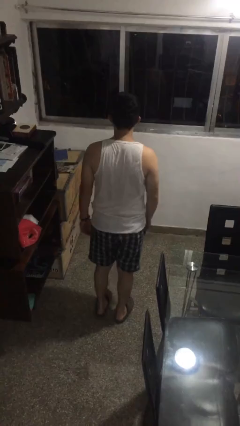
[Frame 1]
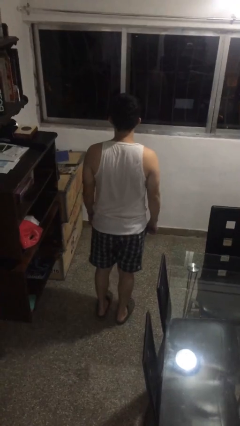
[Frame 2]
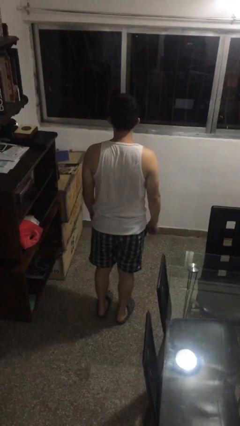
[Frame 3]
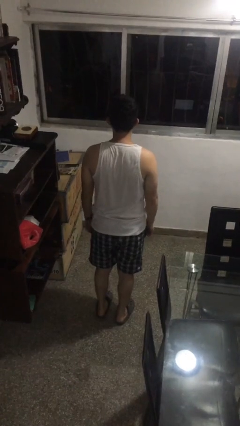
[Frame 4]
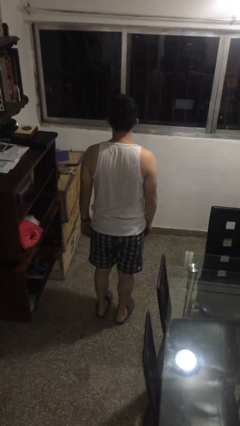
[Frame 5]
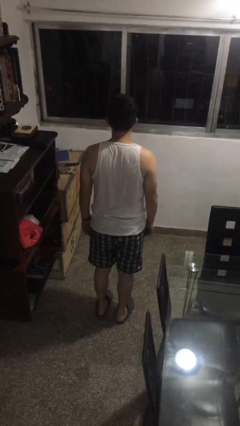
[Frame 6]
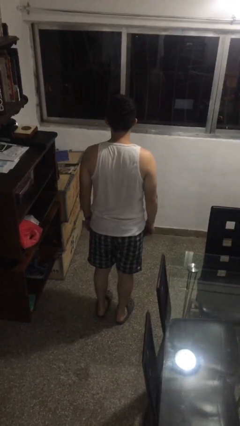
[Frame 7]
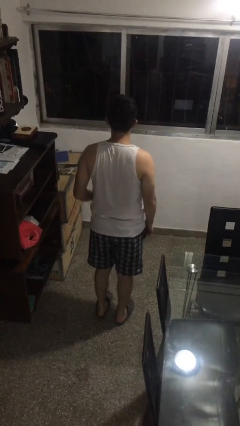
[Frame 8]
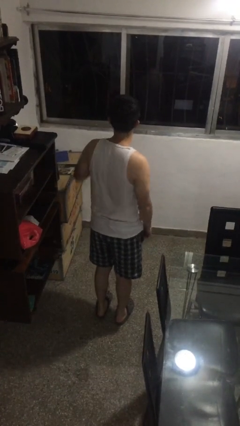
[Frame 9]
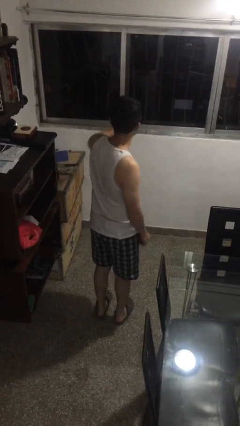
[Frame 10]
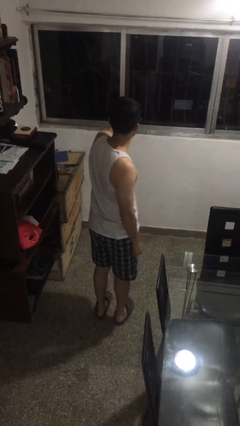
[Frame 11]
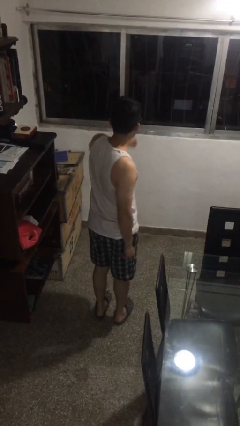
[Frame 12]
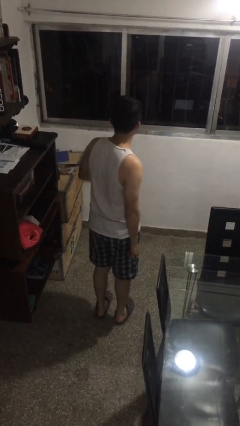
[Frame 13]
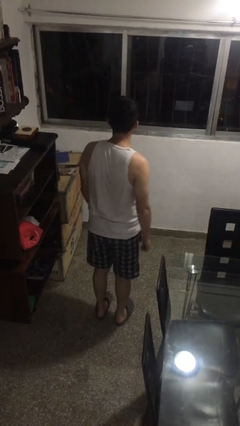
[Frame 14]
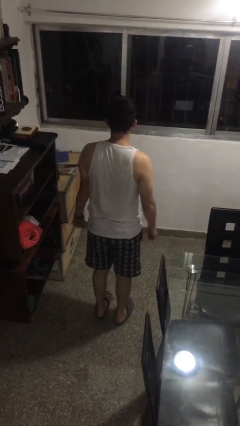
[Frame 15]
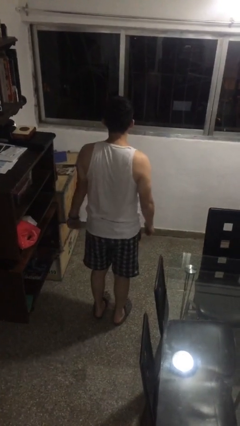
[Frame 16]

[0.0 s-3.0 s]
person karate chop

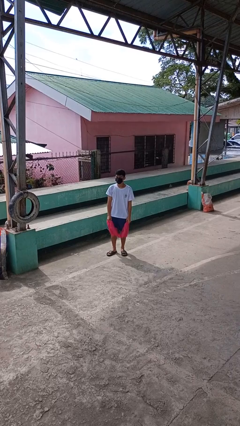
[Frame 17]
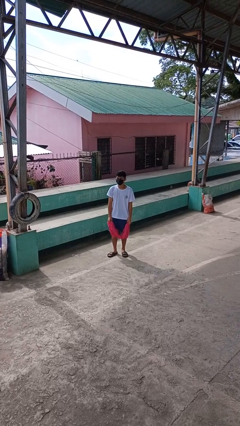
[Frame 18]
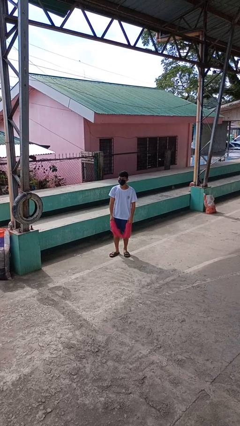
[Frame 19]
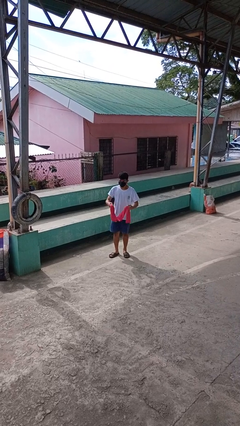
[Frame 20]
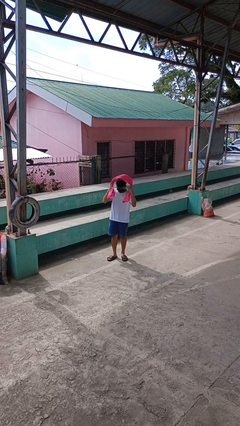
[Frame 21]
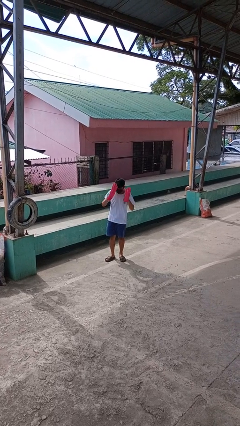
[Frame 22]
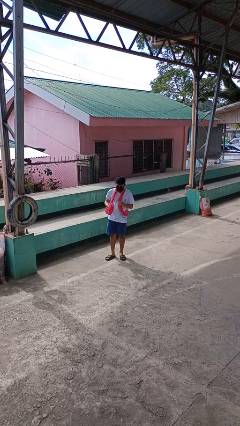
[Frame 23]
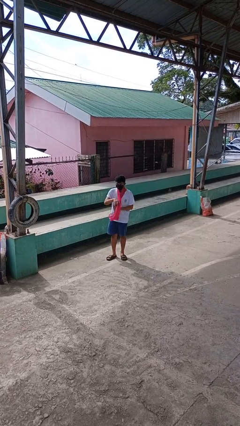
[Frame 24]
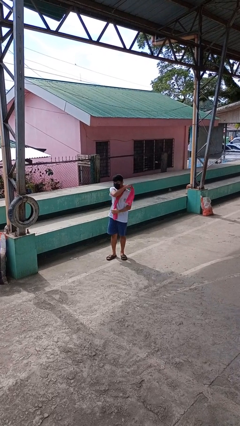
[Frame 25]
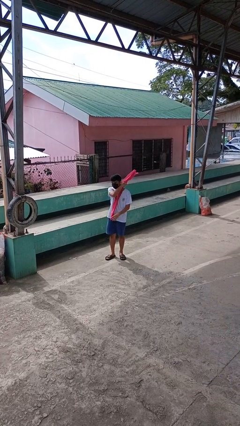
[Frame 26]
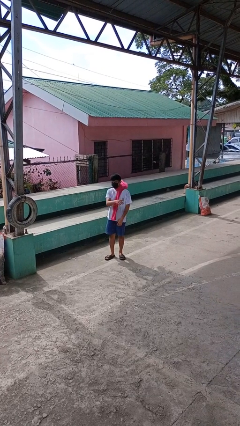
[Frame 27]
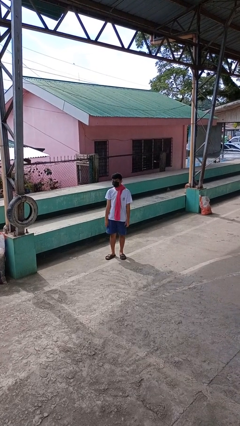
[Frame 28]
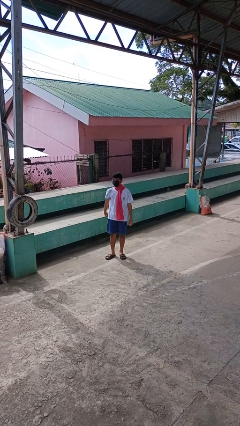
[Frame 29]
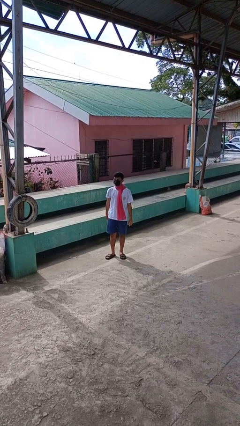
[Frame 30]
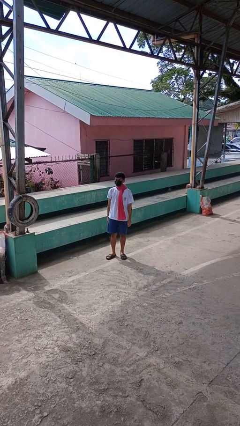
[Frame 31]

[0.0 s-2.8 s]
person puts on scarf

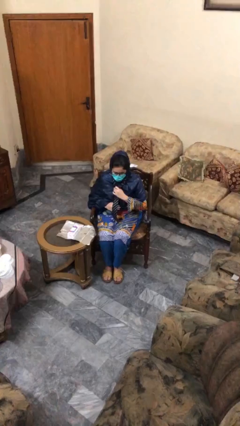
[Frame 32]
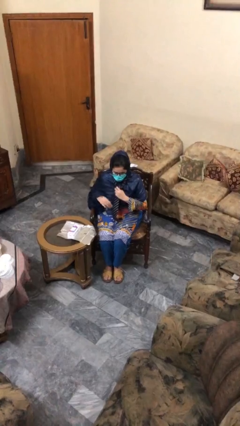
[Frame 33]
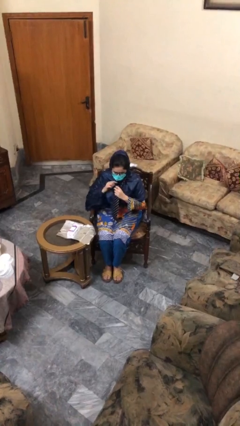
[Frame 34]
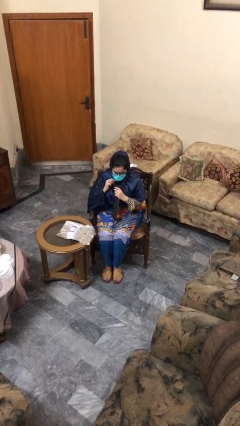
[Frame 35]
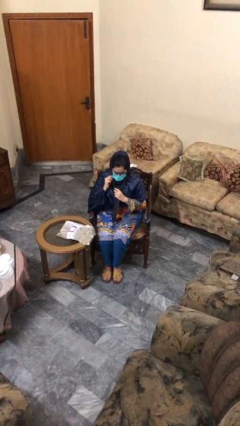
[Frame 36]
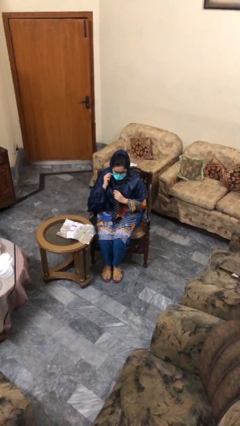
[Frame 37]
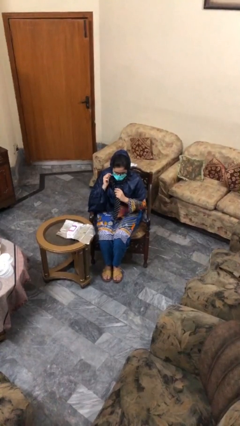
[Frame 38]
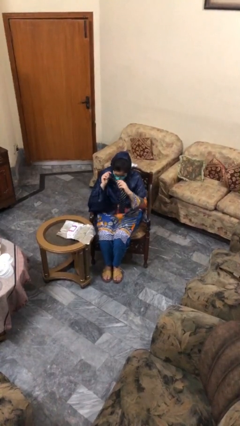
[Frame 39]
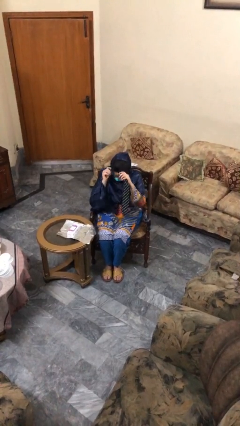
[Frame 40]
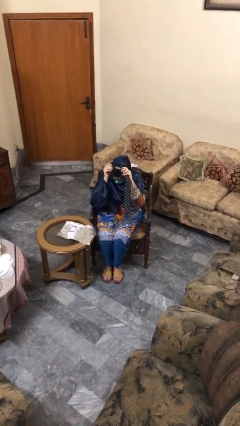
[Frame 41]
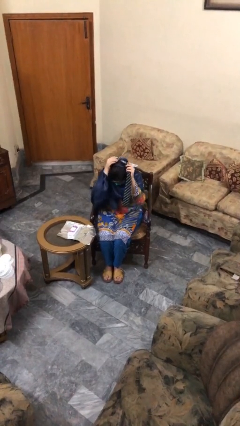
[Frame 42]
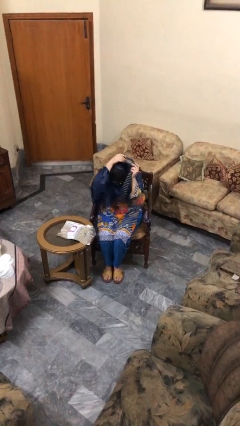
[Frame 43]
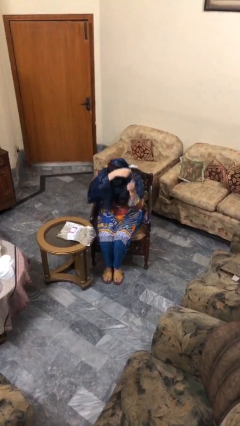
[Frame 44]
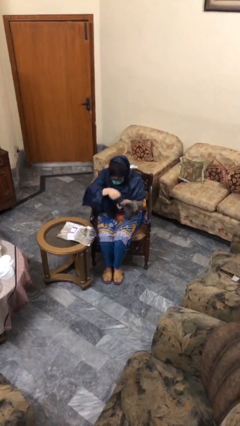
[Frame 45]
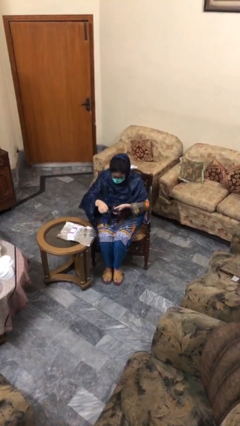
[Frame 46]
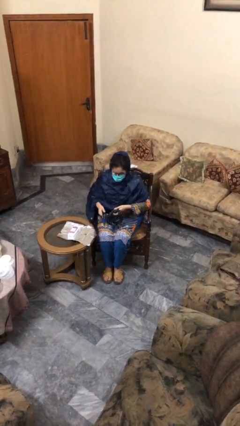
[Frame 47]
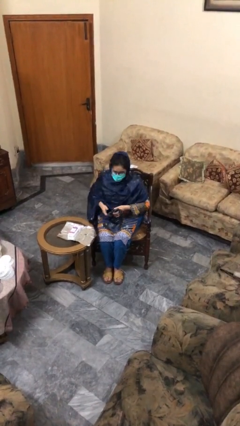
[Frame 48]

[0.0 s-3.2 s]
person takes off necktie

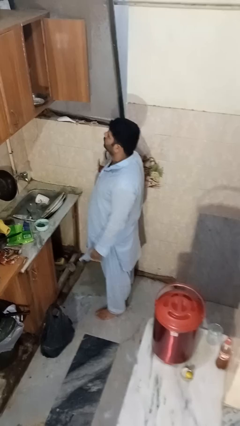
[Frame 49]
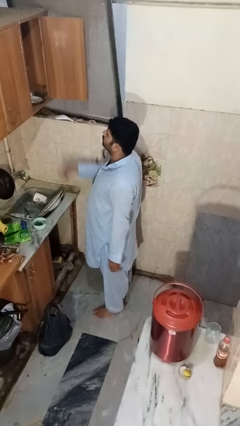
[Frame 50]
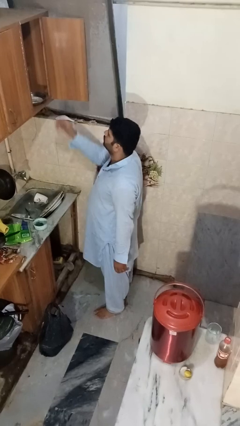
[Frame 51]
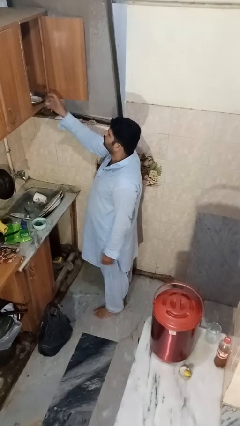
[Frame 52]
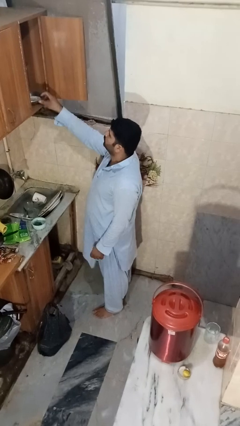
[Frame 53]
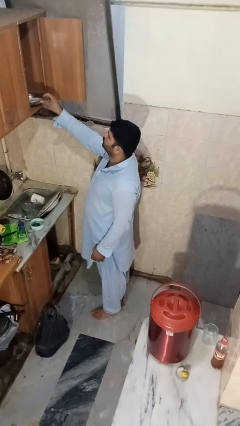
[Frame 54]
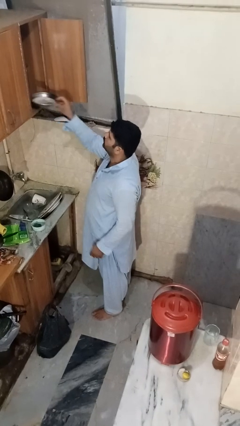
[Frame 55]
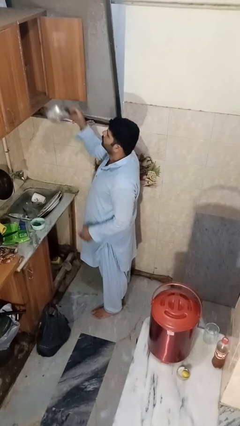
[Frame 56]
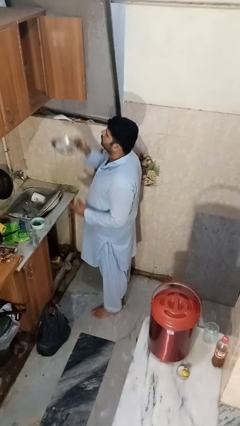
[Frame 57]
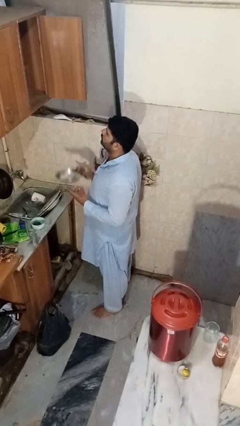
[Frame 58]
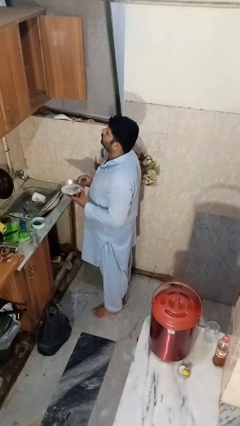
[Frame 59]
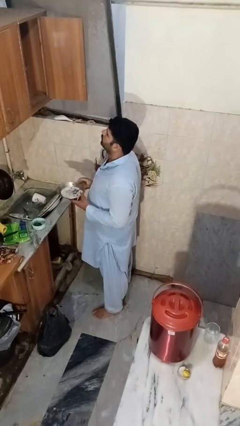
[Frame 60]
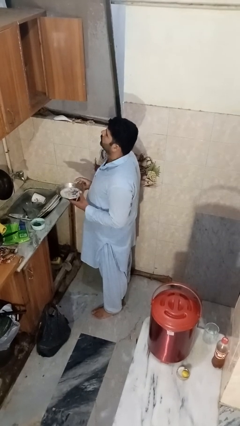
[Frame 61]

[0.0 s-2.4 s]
person takes object from cabinet

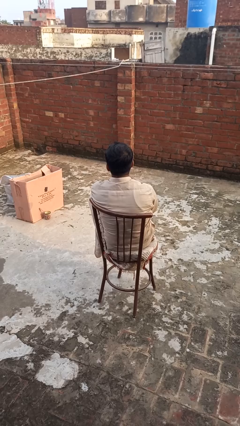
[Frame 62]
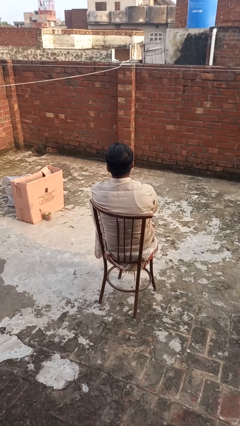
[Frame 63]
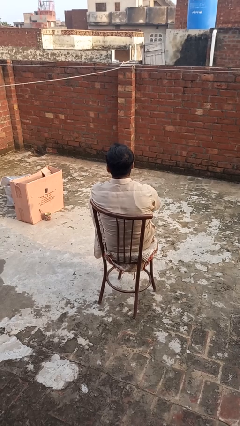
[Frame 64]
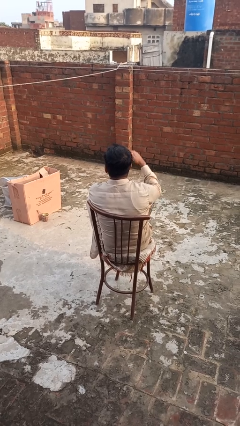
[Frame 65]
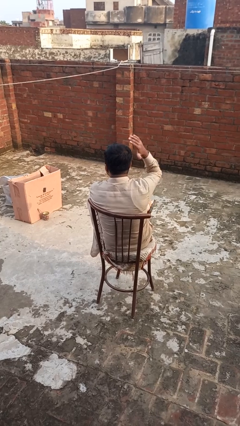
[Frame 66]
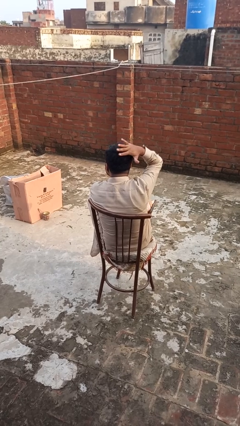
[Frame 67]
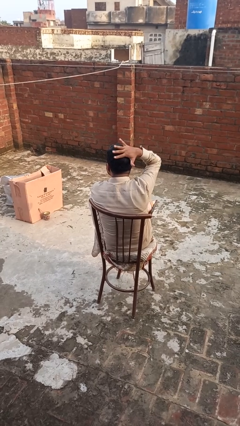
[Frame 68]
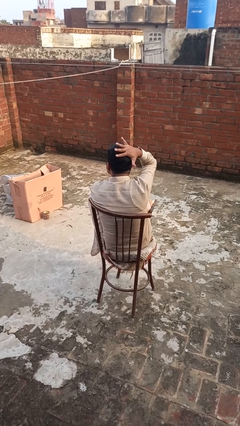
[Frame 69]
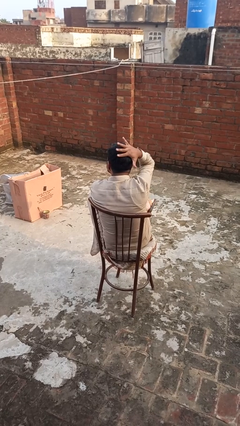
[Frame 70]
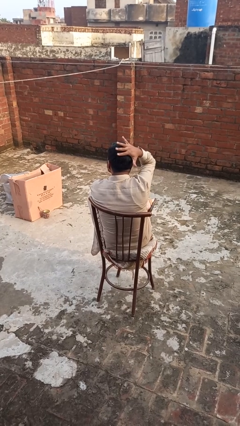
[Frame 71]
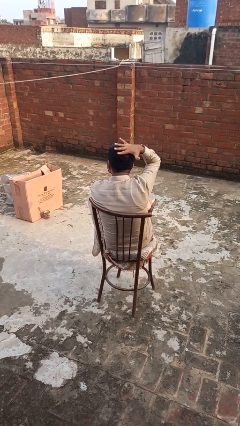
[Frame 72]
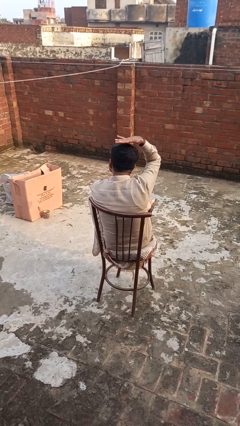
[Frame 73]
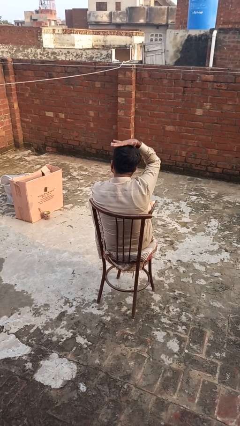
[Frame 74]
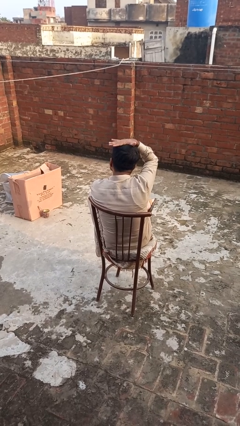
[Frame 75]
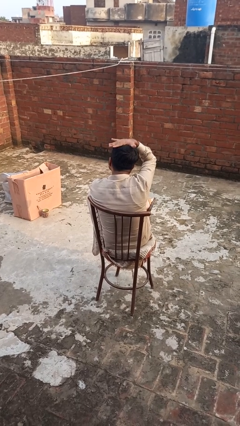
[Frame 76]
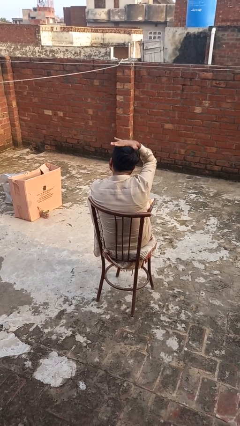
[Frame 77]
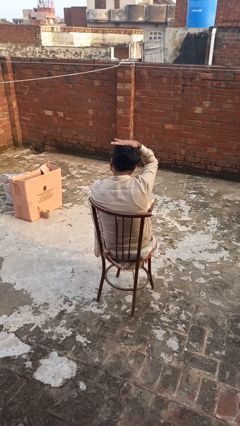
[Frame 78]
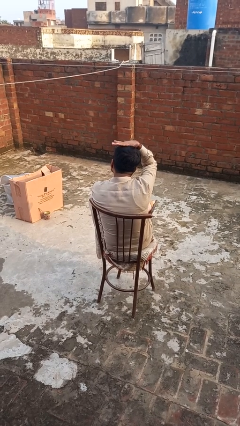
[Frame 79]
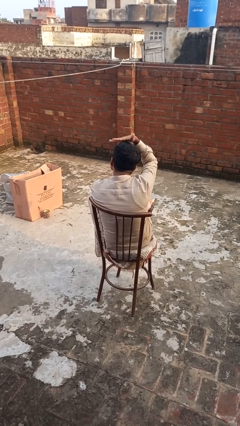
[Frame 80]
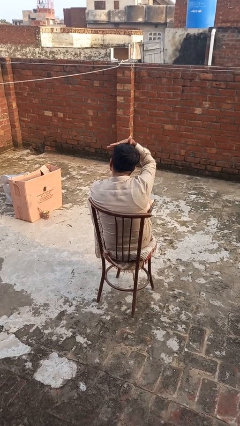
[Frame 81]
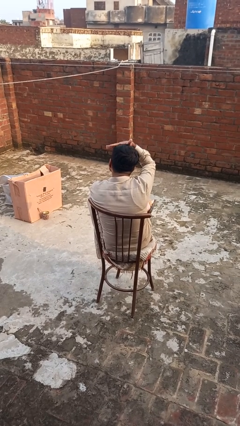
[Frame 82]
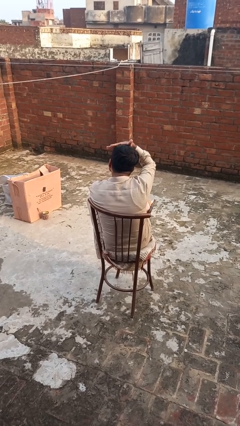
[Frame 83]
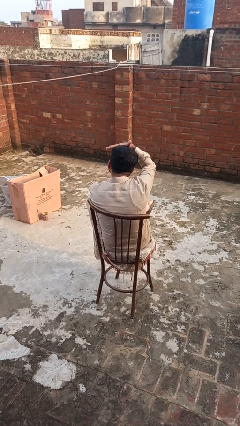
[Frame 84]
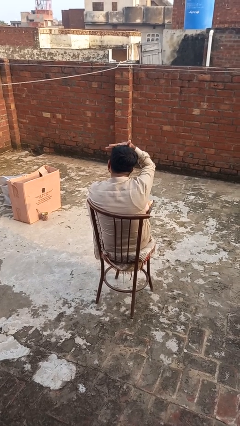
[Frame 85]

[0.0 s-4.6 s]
person pats head

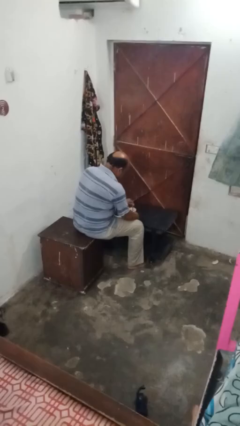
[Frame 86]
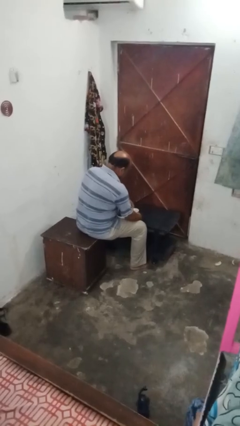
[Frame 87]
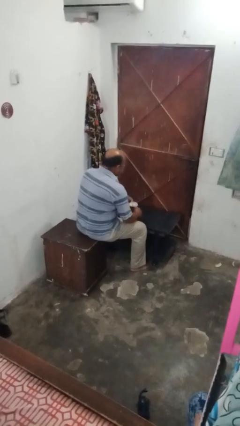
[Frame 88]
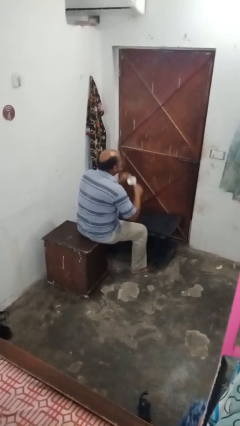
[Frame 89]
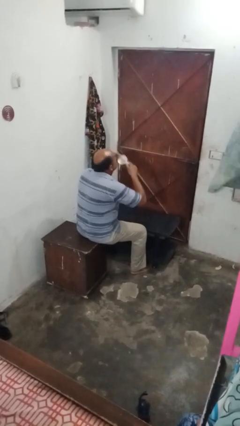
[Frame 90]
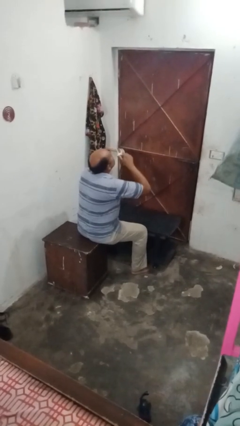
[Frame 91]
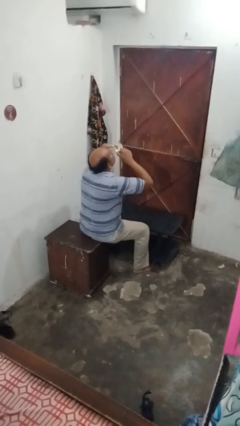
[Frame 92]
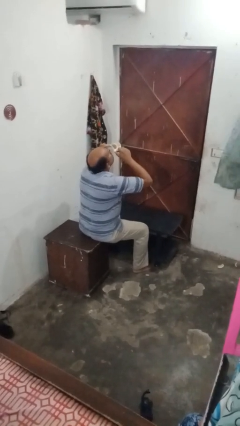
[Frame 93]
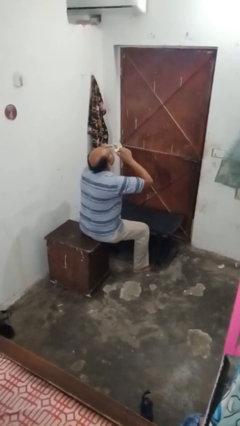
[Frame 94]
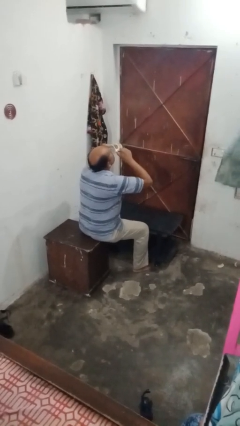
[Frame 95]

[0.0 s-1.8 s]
person drinks from mug
